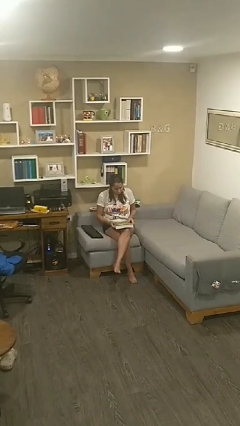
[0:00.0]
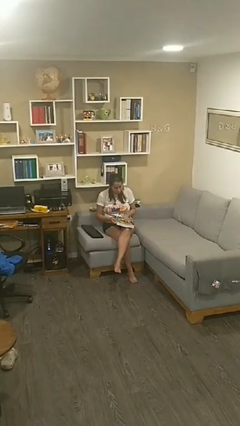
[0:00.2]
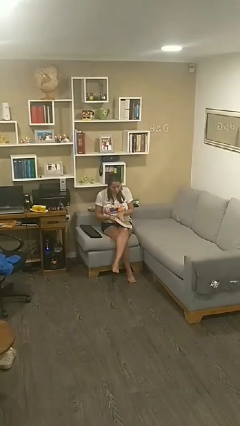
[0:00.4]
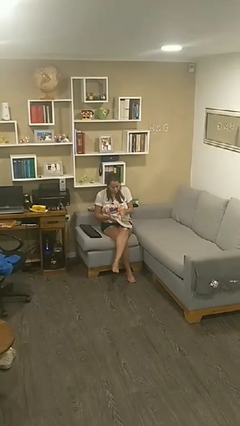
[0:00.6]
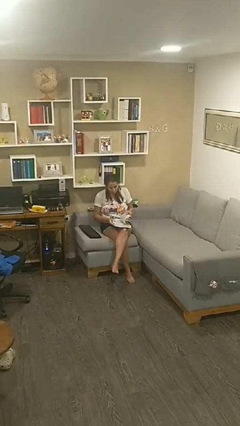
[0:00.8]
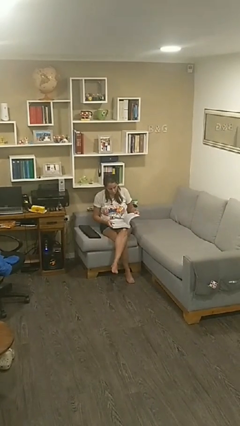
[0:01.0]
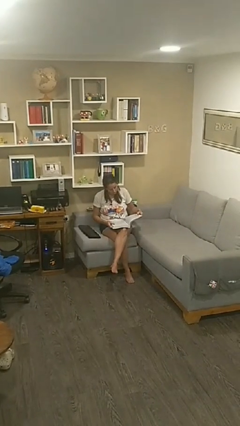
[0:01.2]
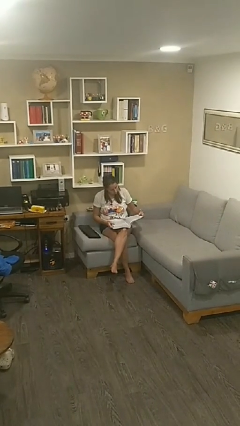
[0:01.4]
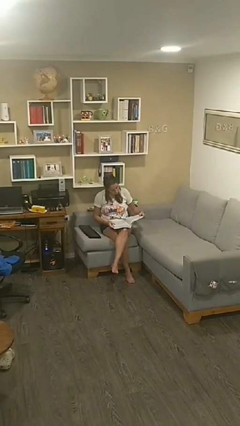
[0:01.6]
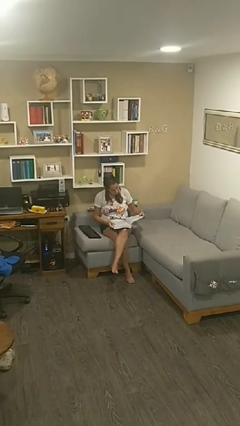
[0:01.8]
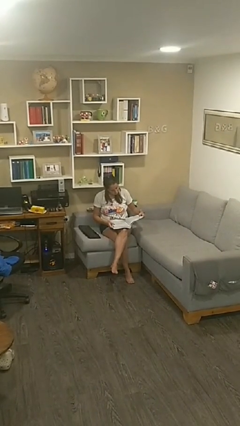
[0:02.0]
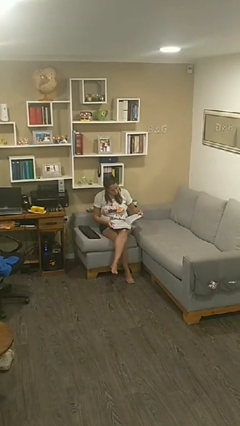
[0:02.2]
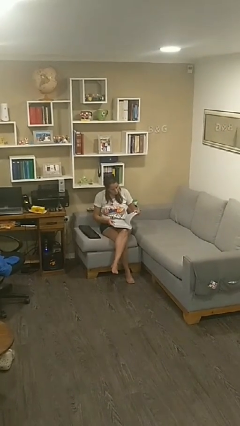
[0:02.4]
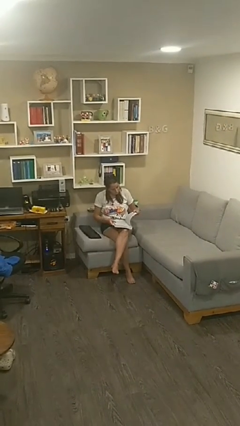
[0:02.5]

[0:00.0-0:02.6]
person reads document

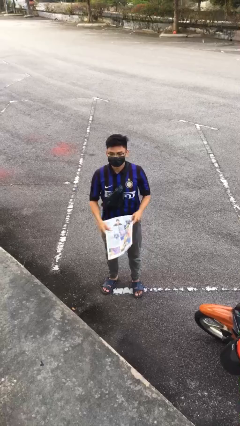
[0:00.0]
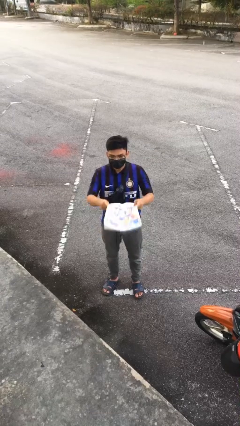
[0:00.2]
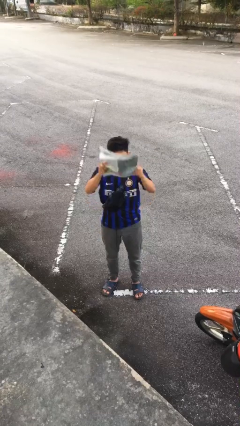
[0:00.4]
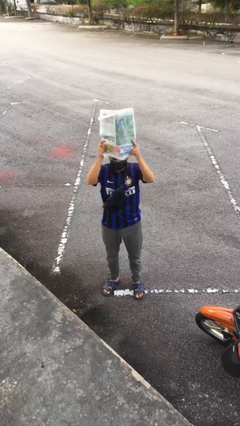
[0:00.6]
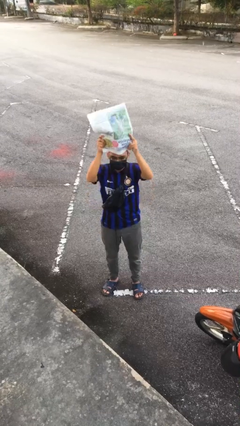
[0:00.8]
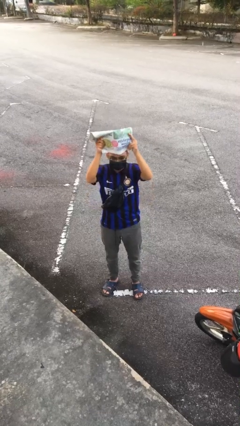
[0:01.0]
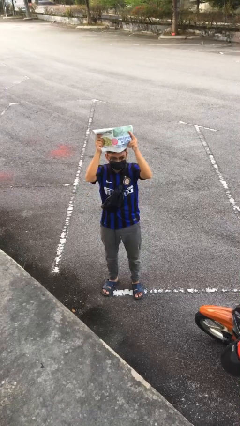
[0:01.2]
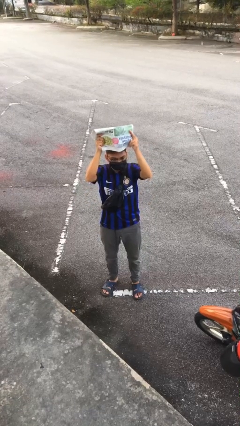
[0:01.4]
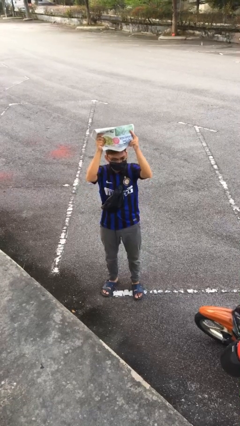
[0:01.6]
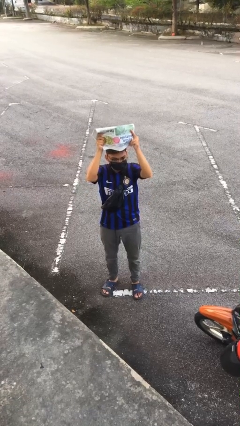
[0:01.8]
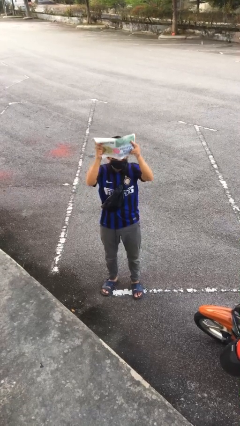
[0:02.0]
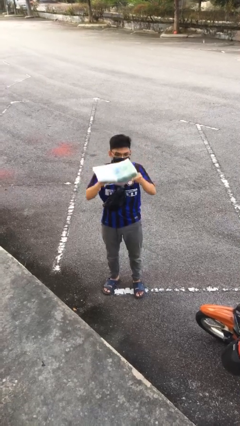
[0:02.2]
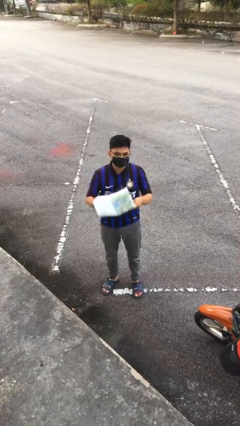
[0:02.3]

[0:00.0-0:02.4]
person holds object above head

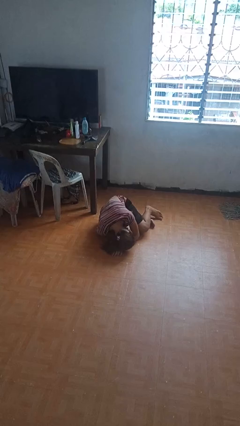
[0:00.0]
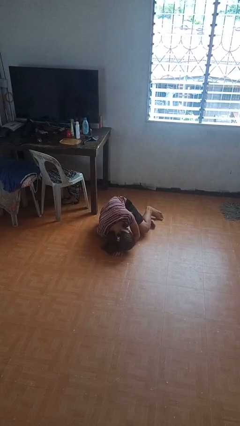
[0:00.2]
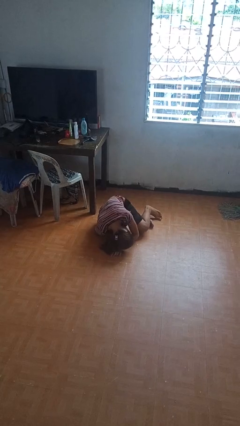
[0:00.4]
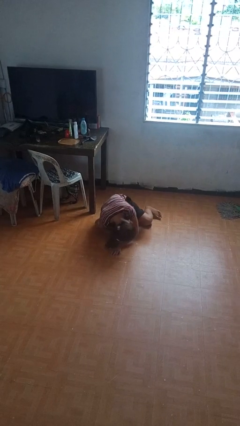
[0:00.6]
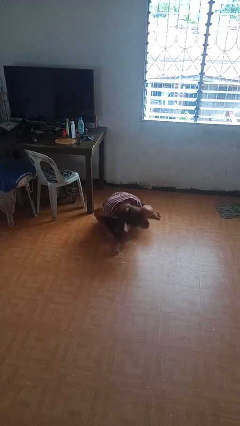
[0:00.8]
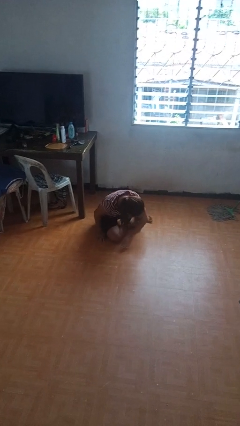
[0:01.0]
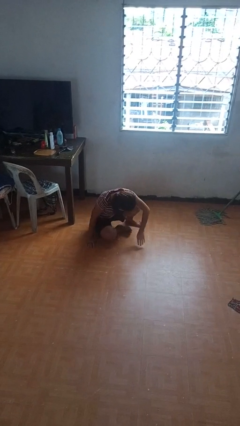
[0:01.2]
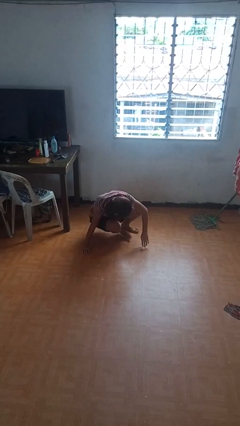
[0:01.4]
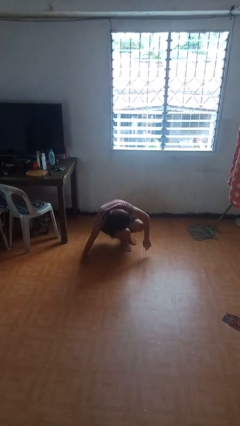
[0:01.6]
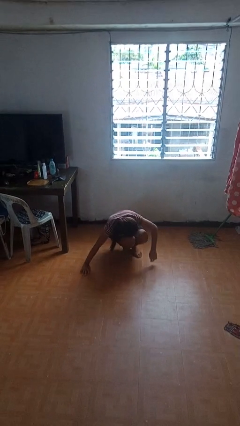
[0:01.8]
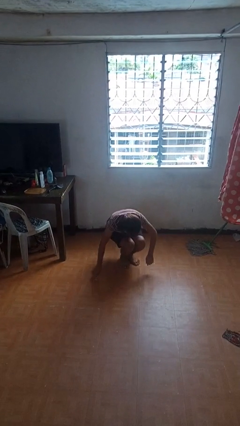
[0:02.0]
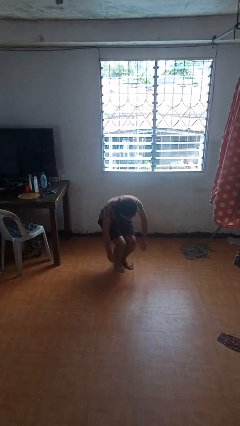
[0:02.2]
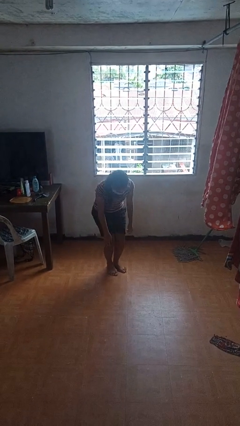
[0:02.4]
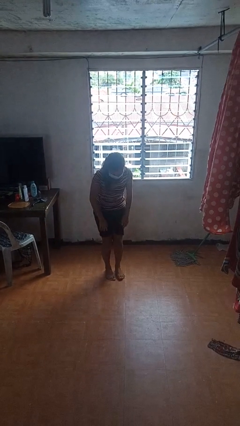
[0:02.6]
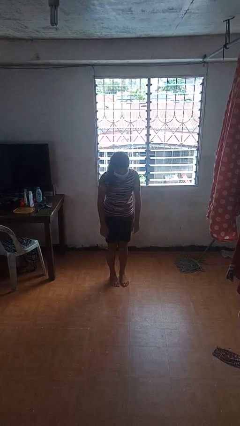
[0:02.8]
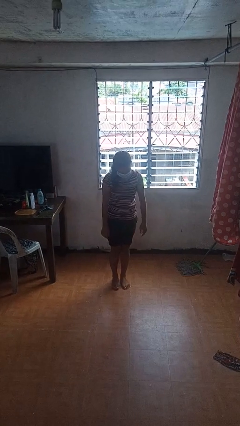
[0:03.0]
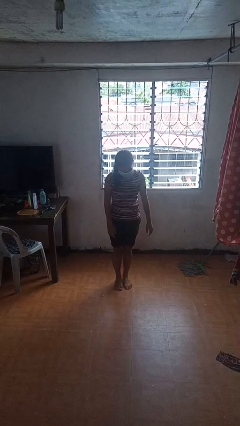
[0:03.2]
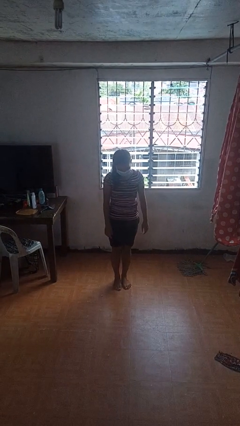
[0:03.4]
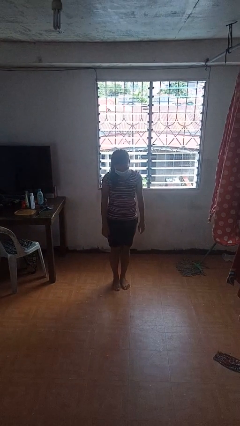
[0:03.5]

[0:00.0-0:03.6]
person stands up from floor

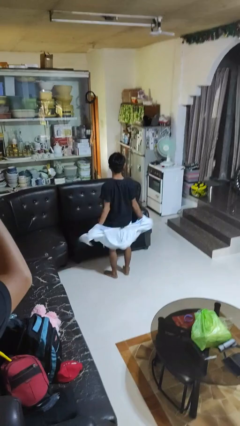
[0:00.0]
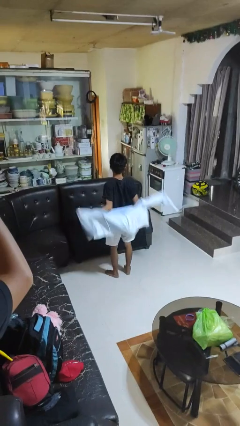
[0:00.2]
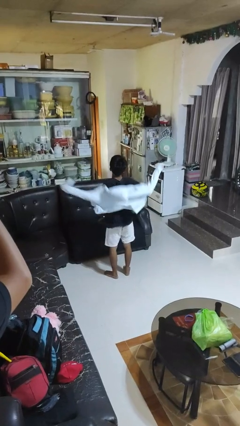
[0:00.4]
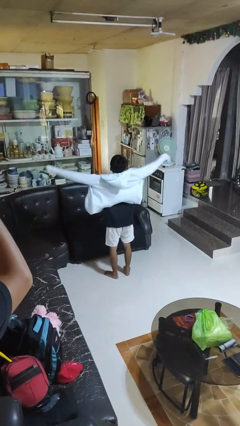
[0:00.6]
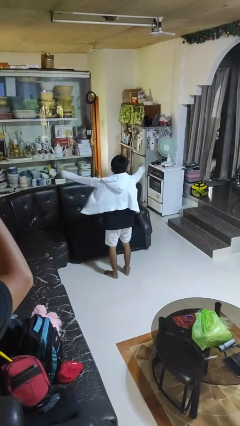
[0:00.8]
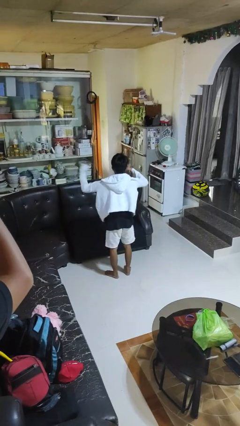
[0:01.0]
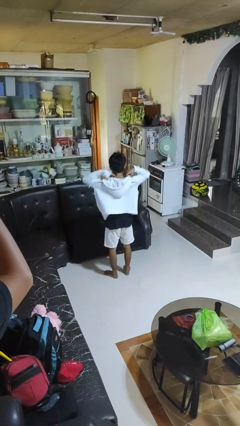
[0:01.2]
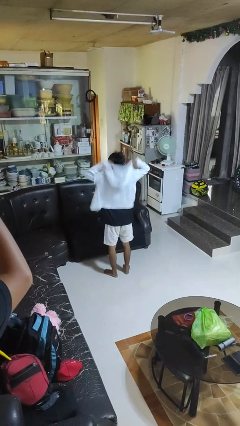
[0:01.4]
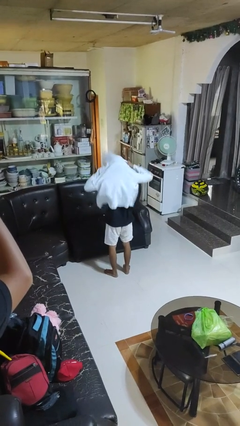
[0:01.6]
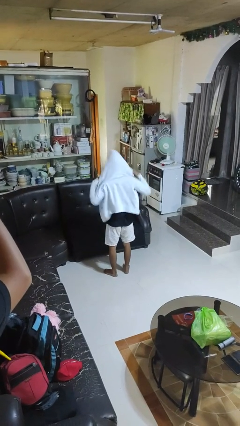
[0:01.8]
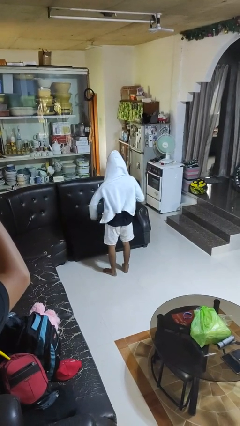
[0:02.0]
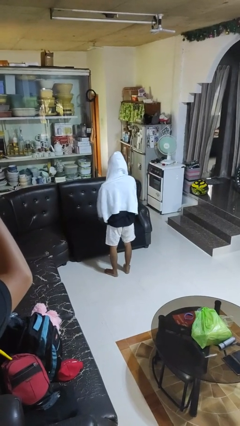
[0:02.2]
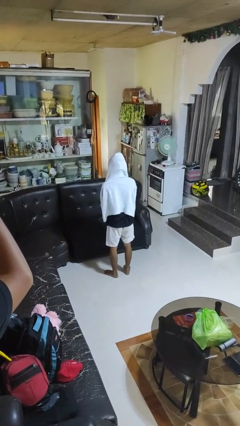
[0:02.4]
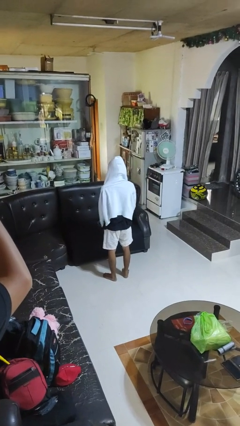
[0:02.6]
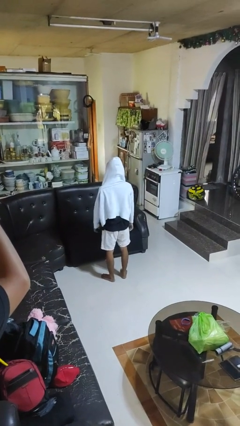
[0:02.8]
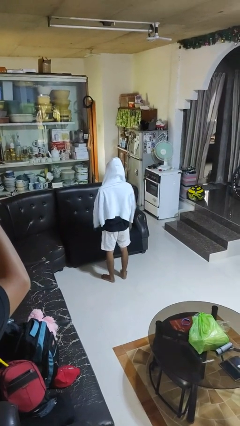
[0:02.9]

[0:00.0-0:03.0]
person puts on hoodie

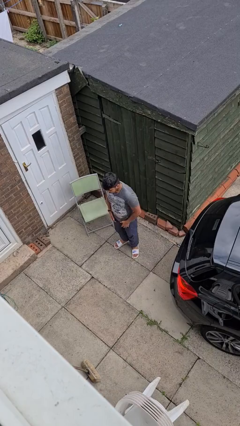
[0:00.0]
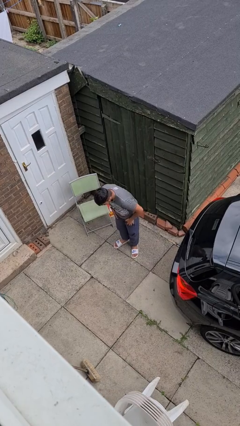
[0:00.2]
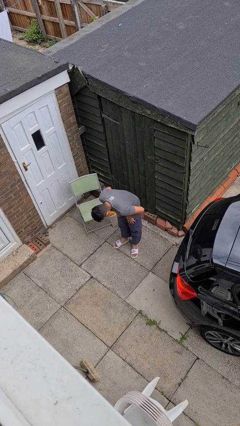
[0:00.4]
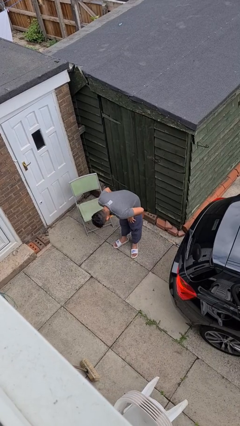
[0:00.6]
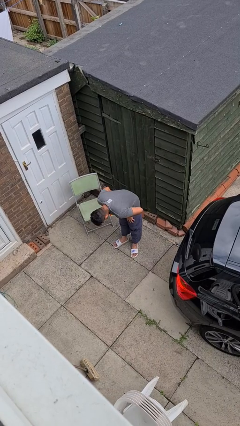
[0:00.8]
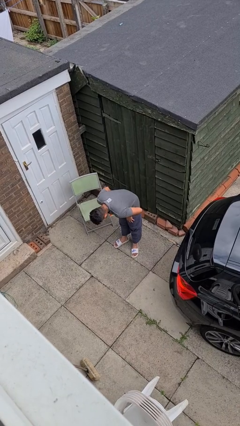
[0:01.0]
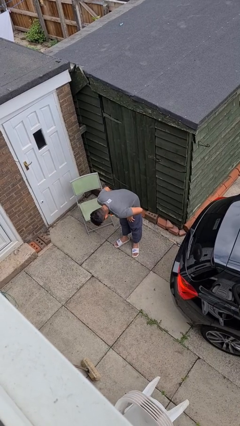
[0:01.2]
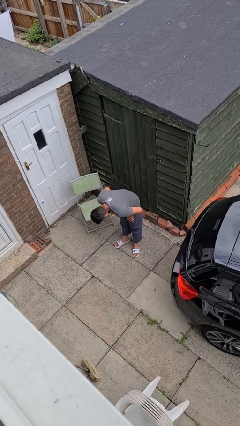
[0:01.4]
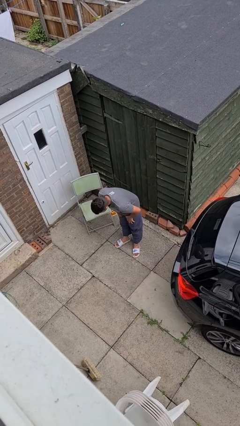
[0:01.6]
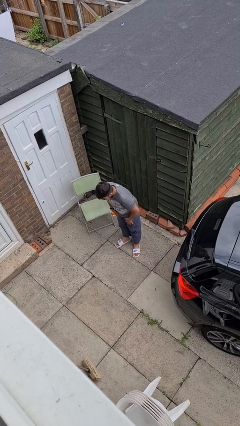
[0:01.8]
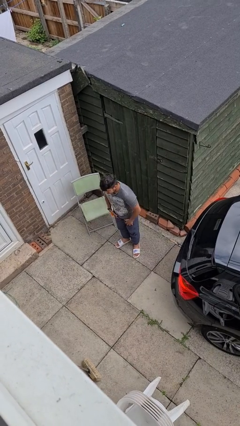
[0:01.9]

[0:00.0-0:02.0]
person bows

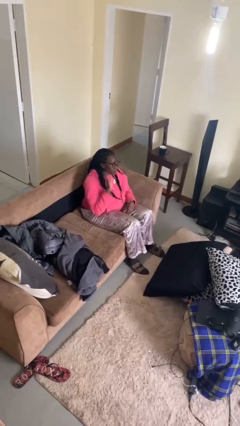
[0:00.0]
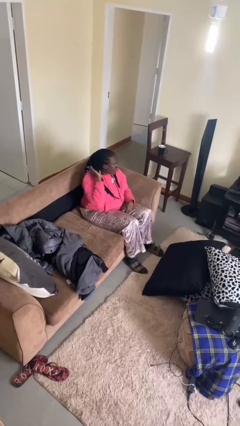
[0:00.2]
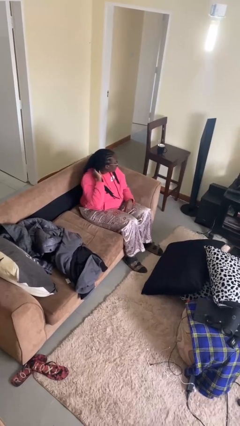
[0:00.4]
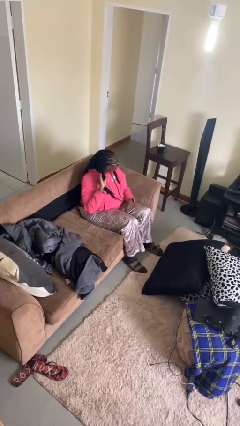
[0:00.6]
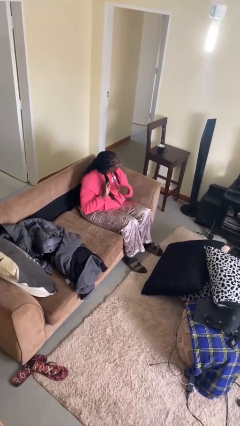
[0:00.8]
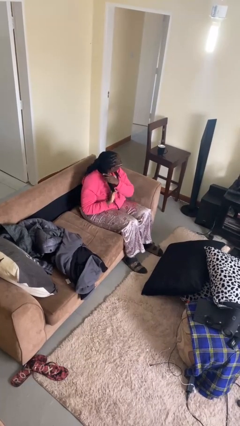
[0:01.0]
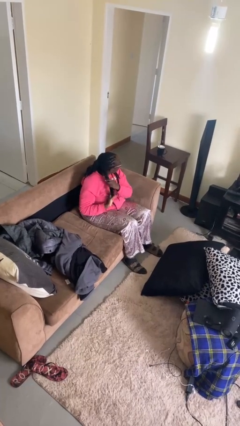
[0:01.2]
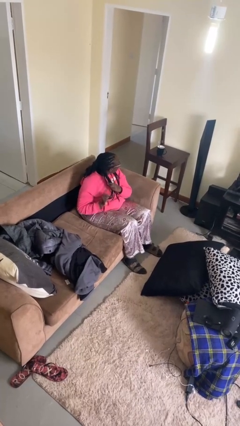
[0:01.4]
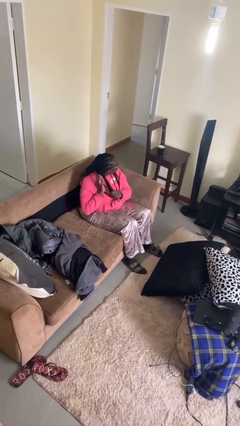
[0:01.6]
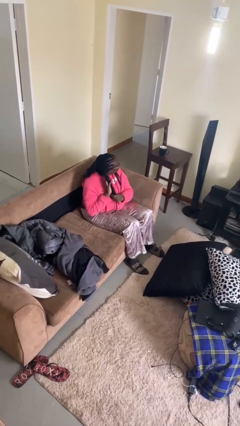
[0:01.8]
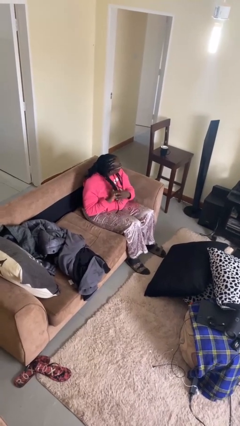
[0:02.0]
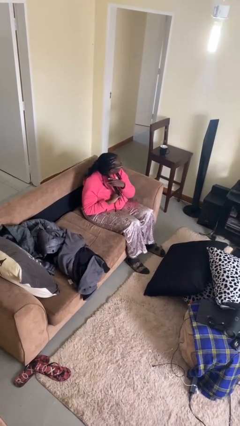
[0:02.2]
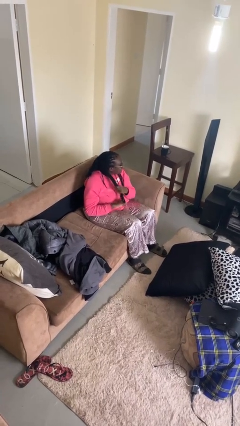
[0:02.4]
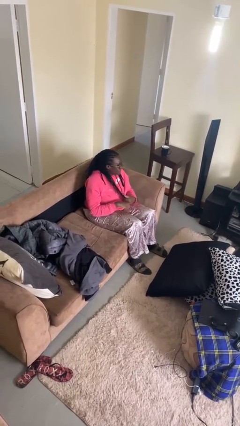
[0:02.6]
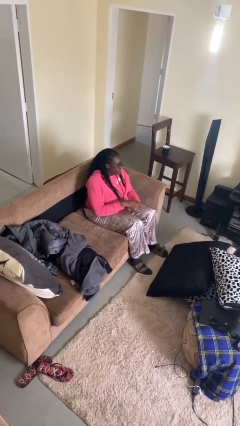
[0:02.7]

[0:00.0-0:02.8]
person strokes hair

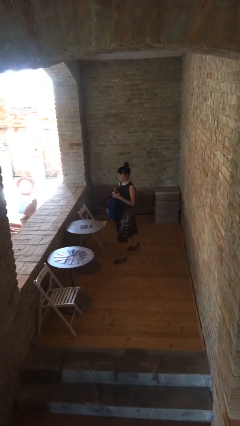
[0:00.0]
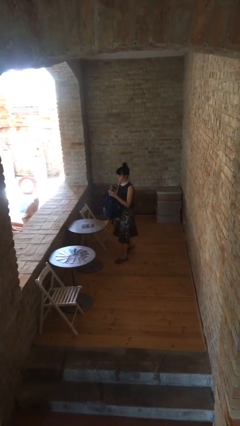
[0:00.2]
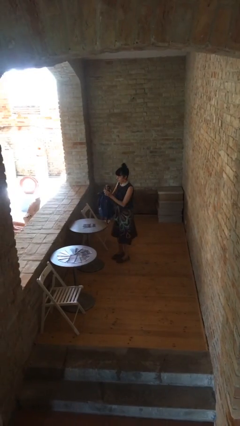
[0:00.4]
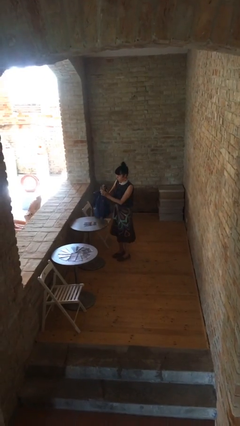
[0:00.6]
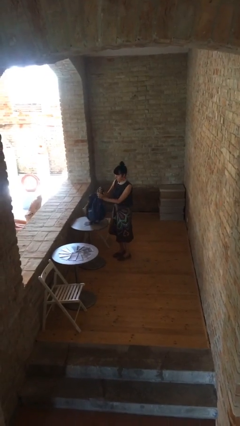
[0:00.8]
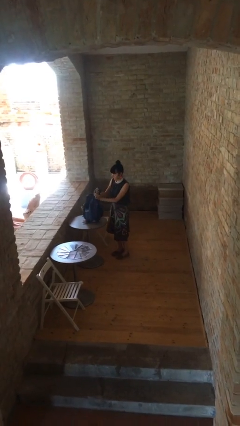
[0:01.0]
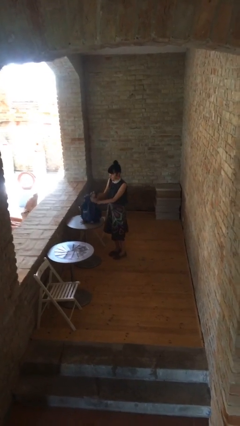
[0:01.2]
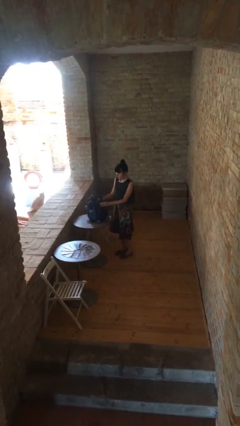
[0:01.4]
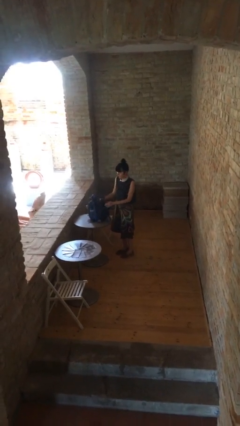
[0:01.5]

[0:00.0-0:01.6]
person puts down object on table
